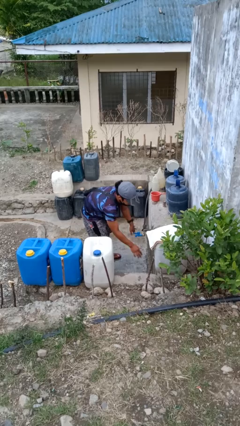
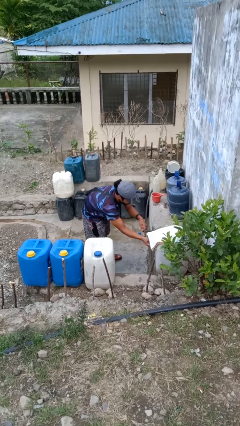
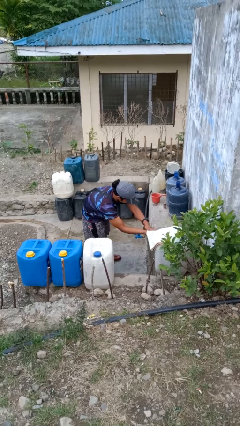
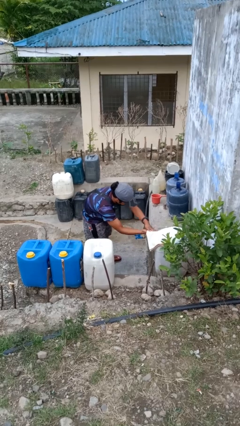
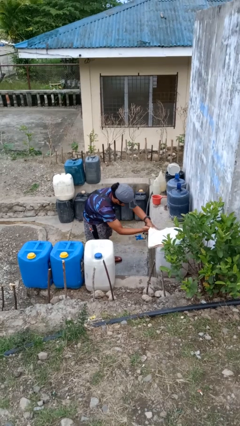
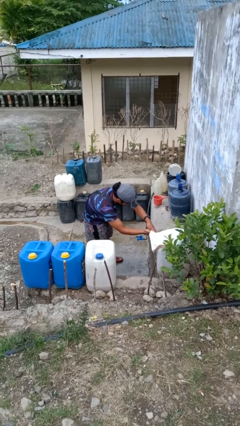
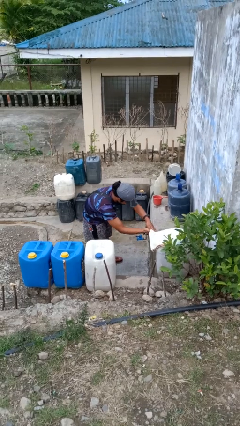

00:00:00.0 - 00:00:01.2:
person dries hands with towel

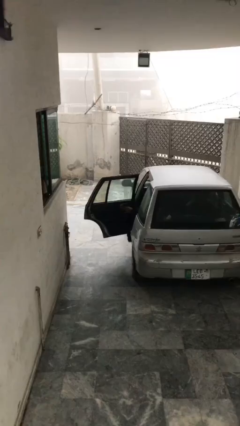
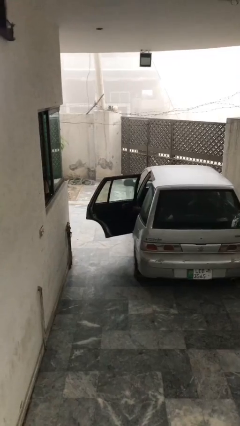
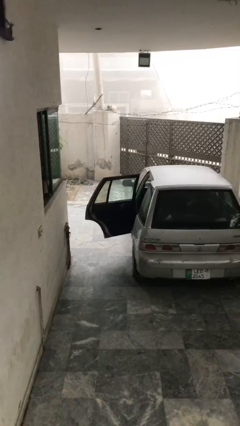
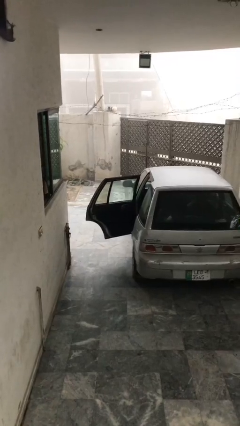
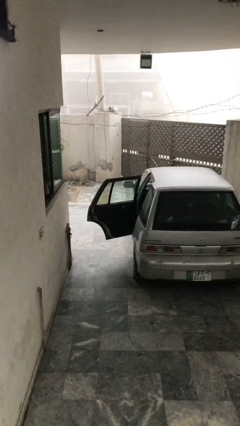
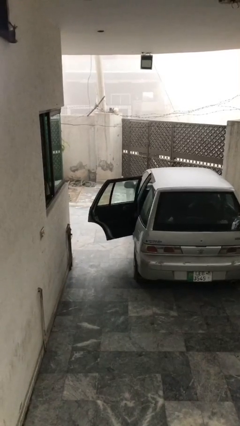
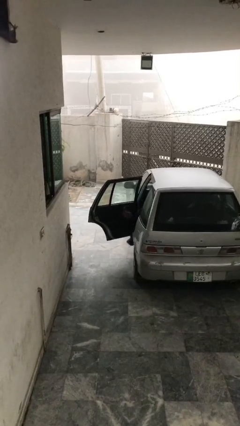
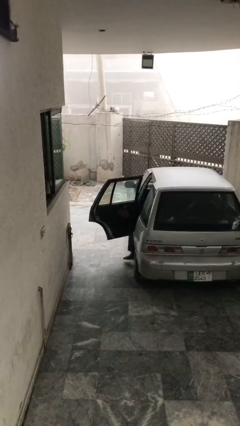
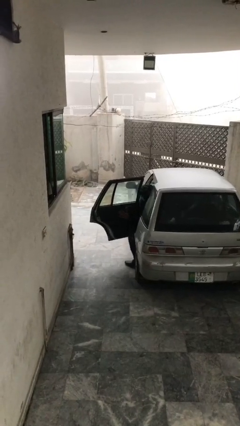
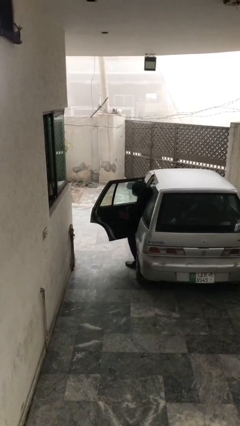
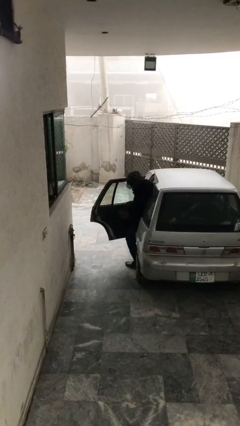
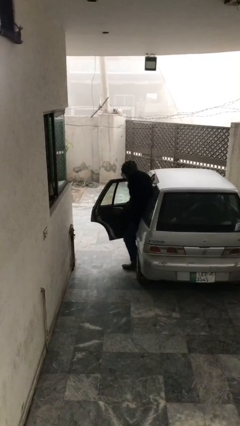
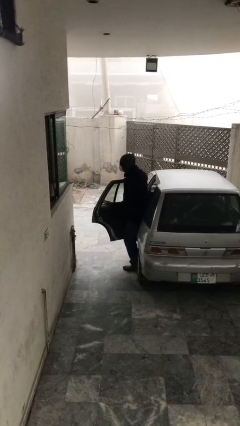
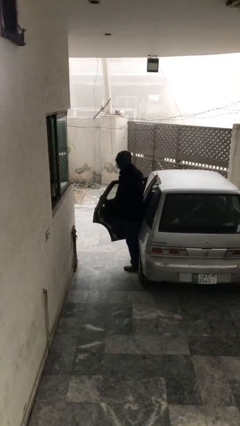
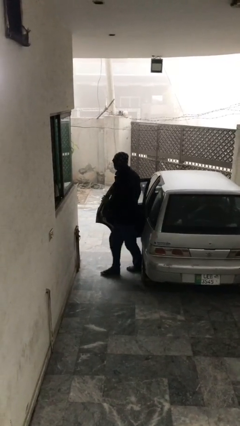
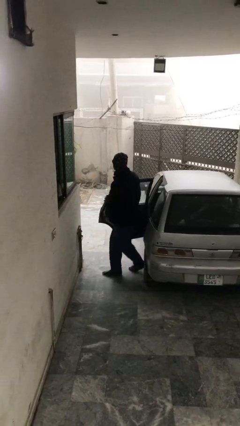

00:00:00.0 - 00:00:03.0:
person exits car

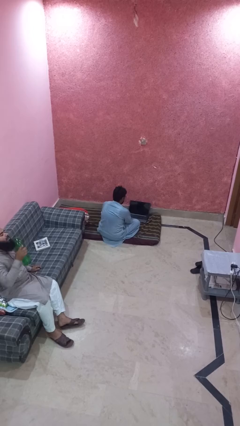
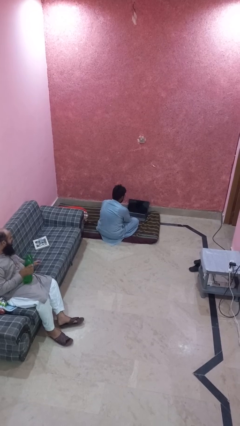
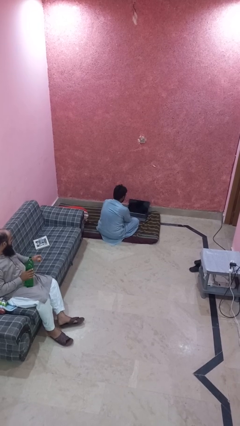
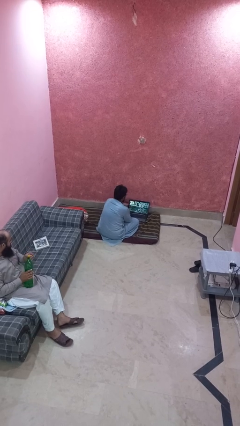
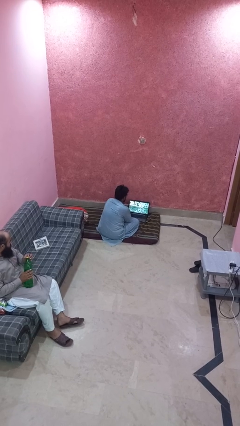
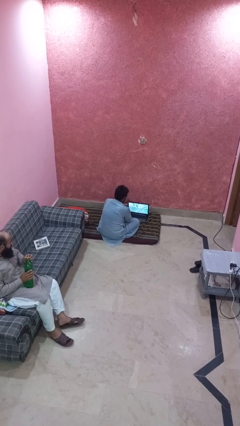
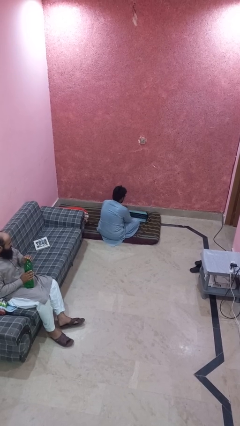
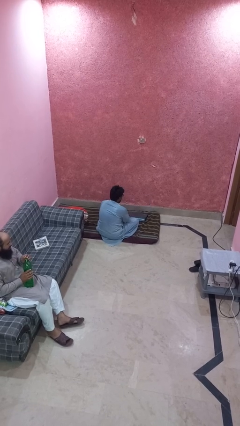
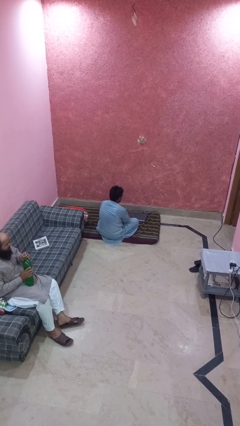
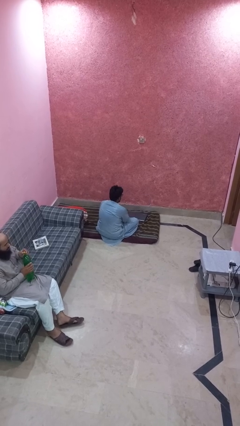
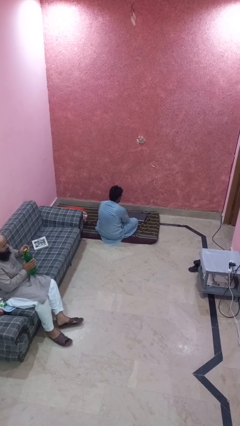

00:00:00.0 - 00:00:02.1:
person closes laptop

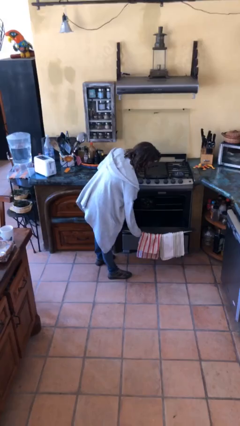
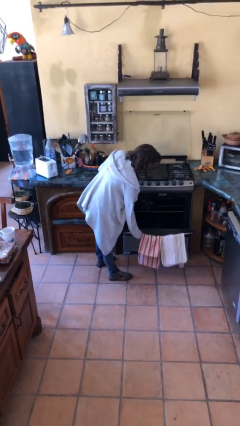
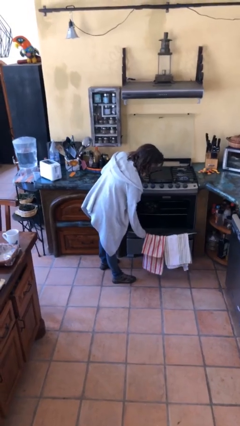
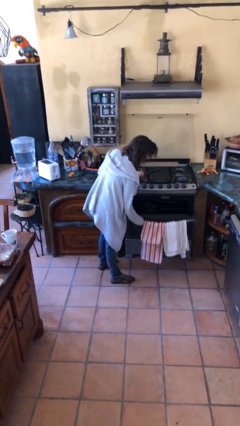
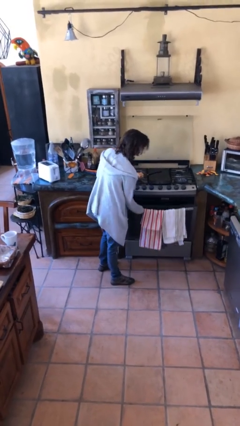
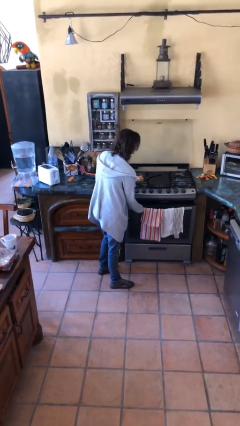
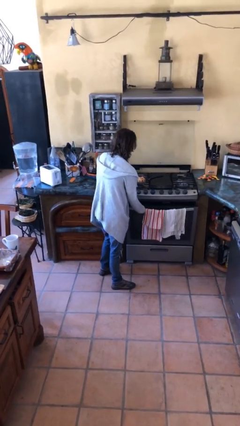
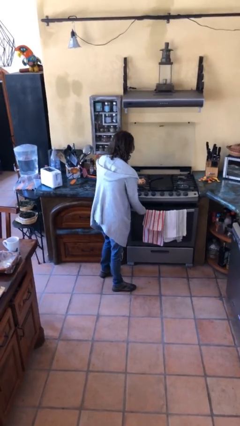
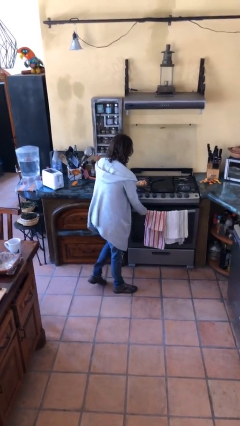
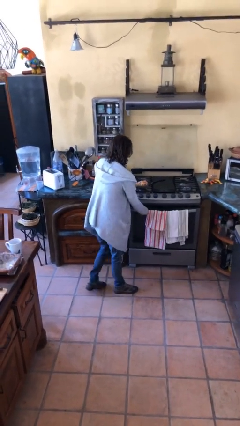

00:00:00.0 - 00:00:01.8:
person closes oven door

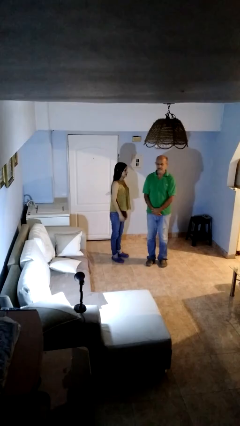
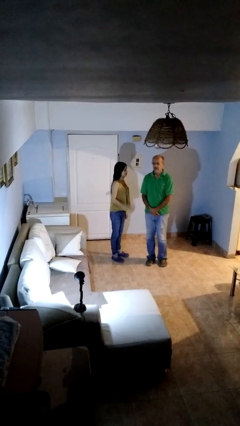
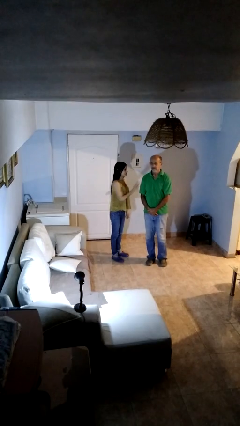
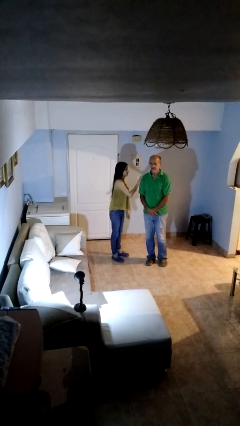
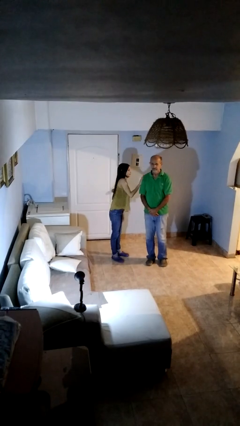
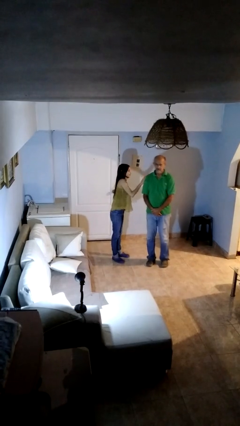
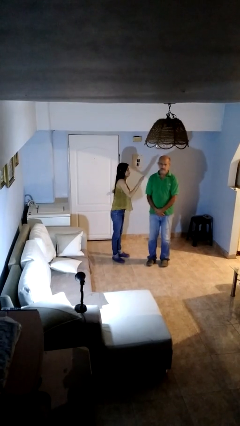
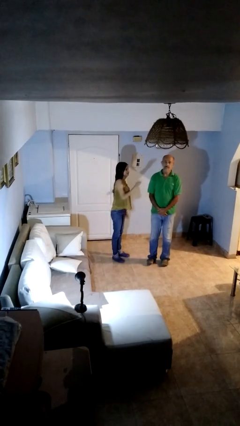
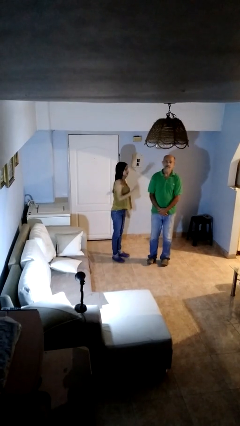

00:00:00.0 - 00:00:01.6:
person shoves person

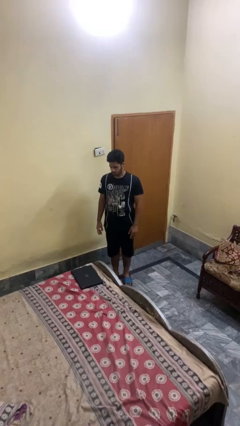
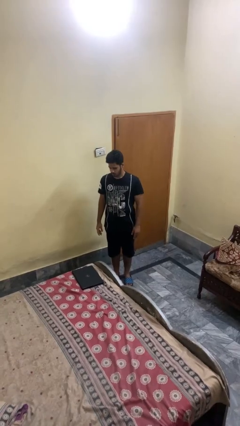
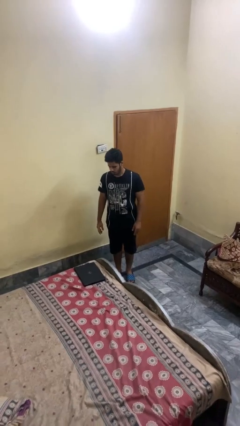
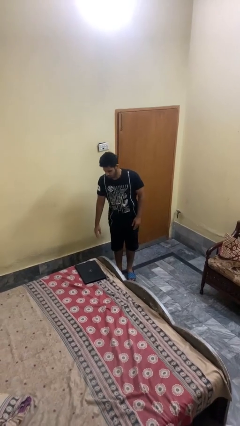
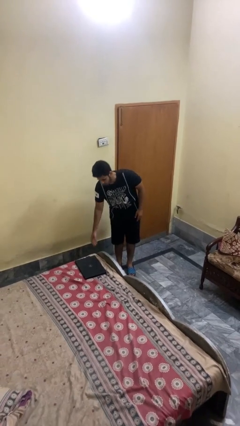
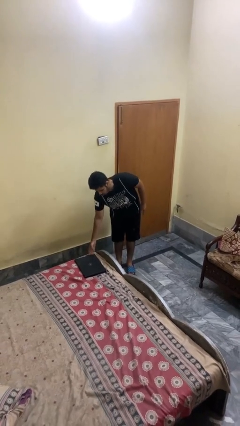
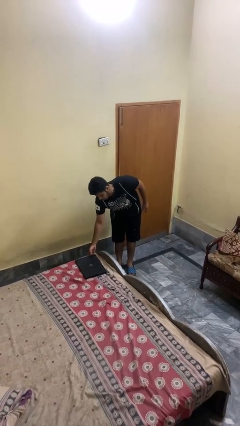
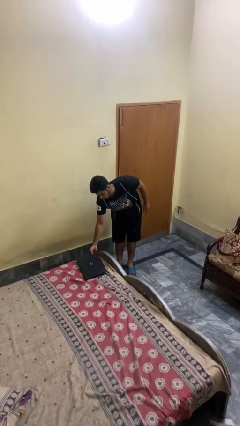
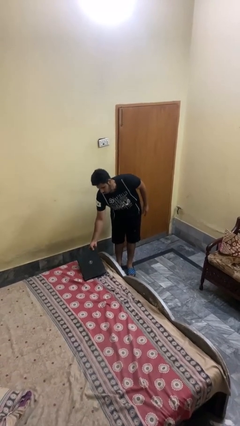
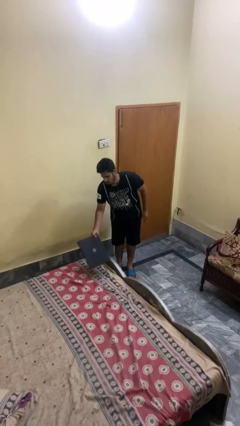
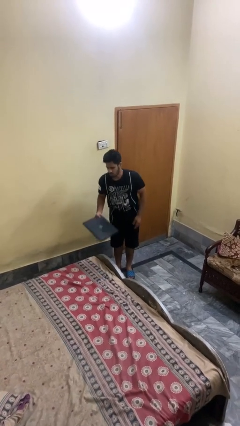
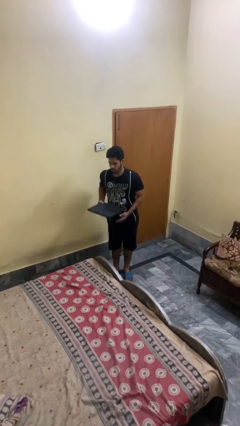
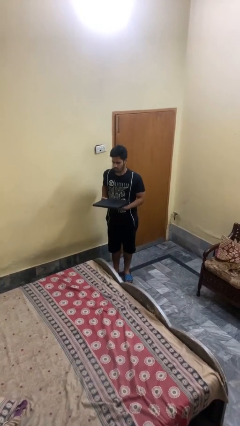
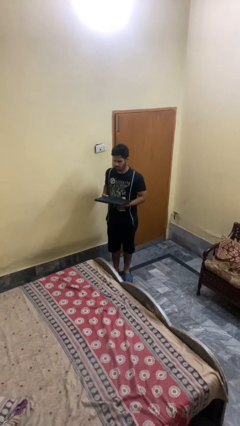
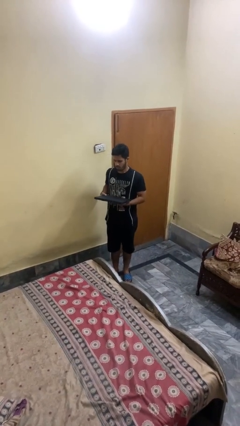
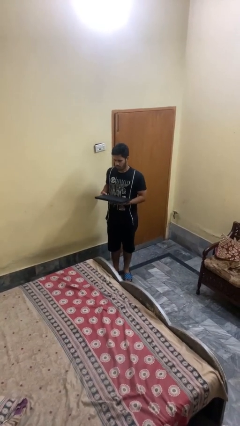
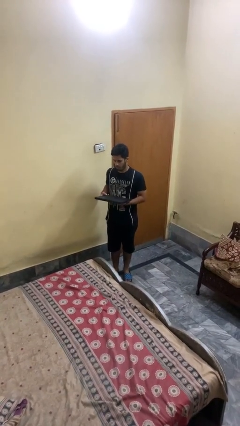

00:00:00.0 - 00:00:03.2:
person picks up object from bed

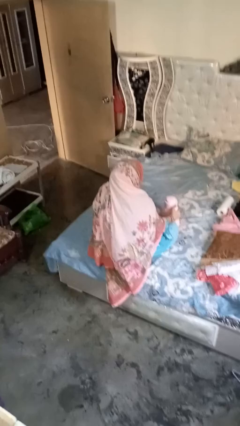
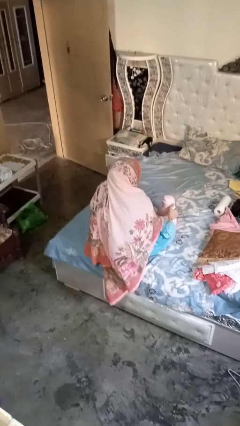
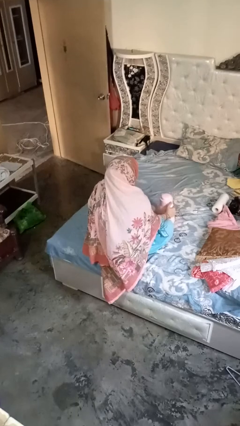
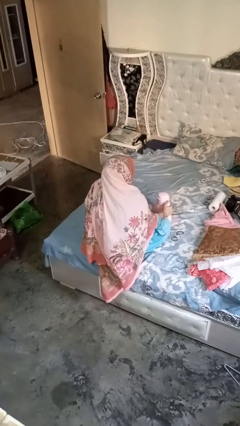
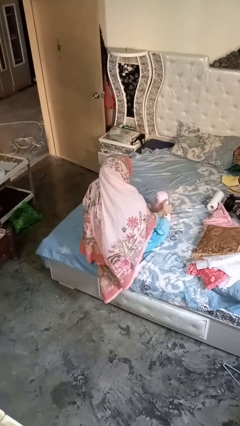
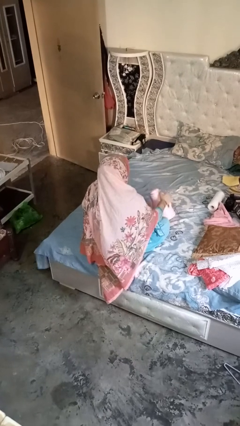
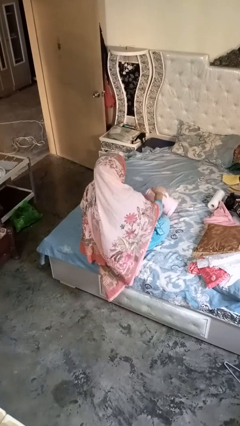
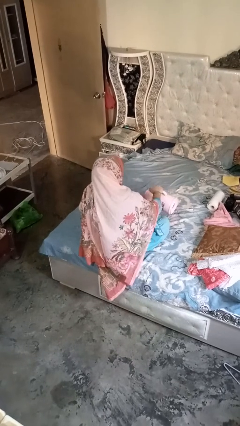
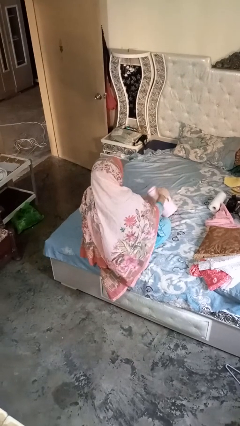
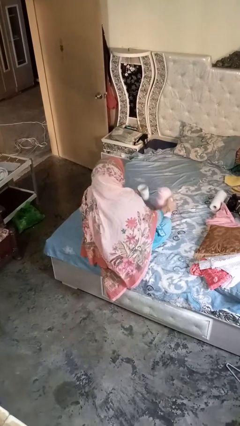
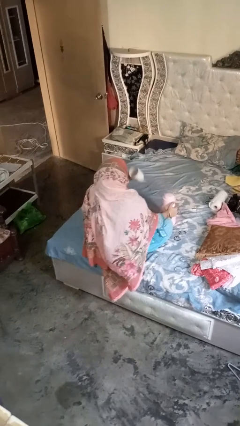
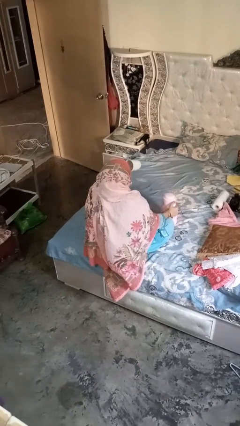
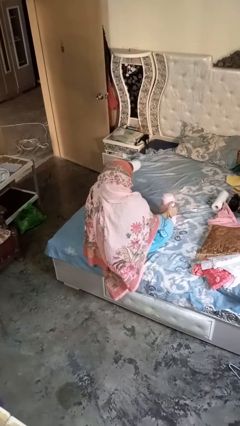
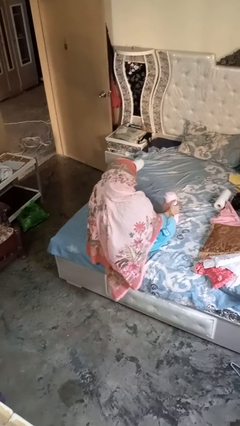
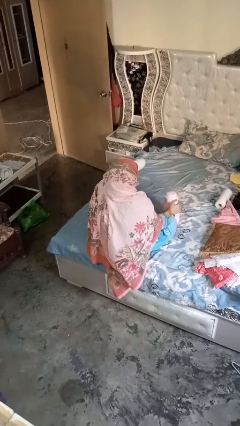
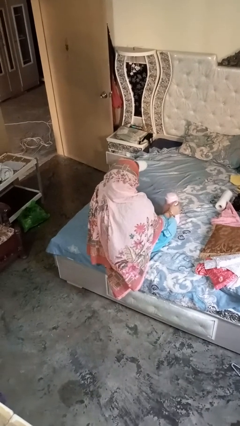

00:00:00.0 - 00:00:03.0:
person pours coffee into mug

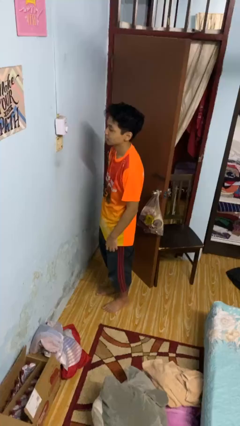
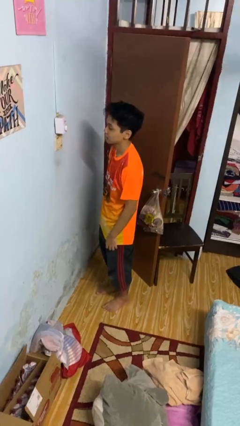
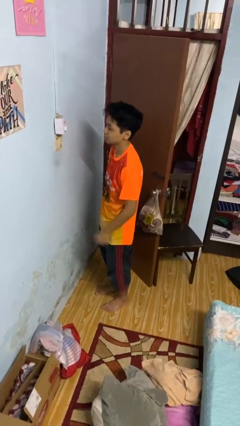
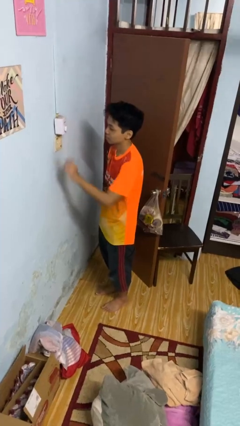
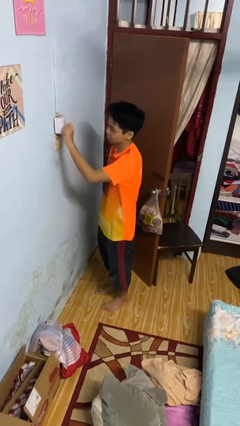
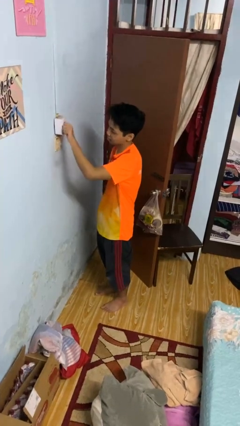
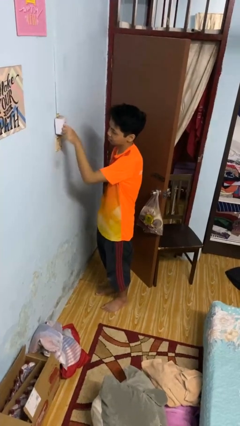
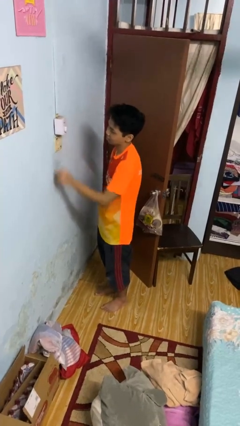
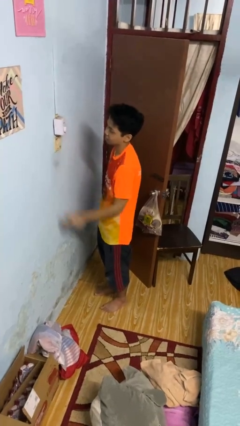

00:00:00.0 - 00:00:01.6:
person adjusts thermostat
